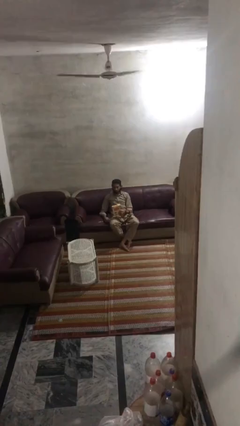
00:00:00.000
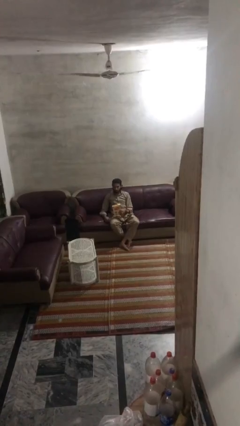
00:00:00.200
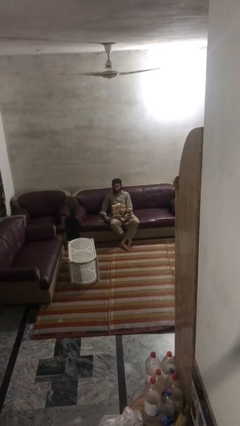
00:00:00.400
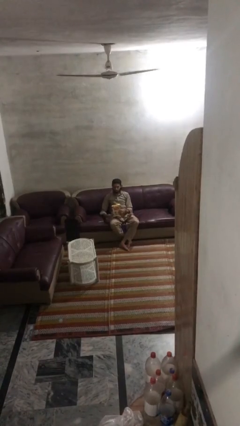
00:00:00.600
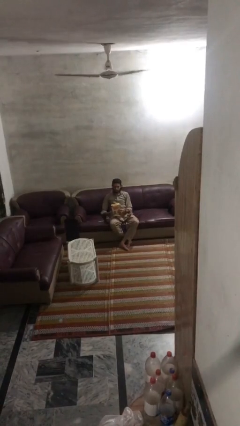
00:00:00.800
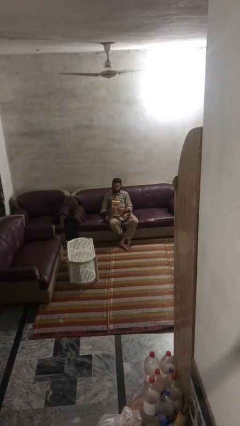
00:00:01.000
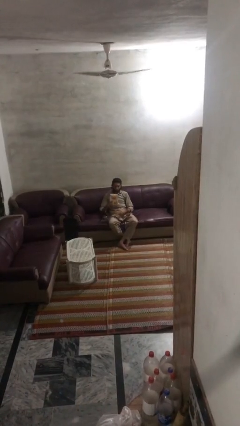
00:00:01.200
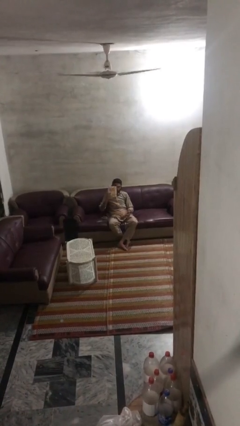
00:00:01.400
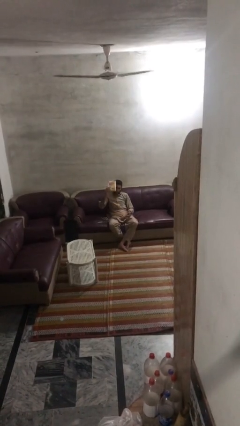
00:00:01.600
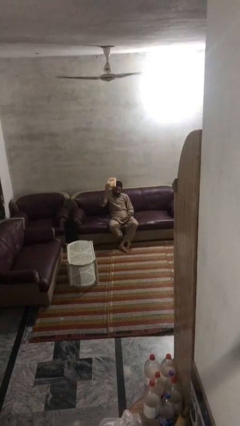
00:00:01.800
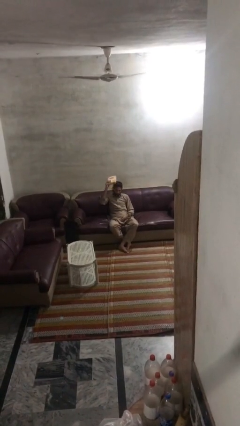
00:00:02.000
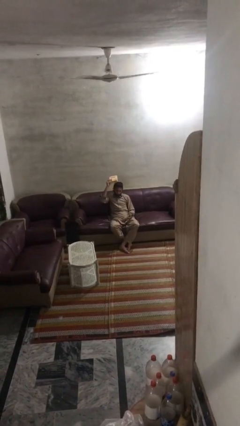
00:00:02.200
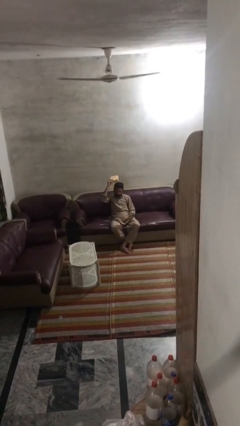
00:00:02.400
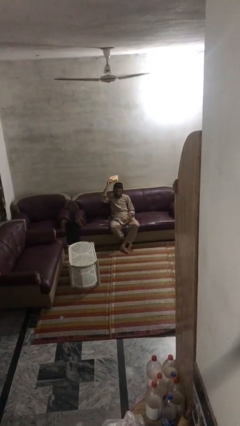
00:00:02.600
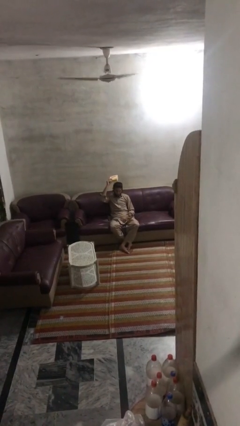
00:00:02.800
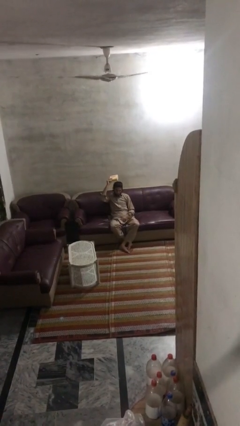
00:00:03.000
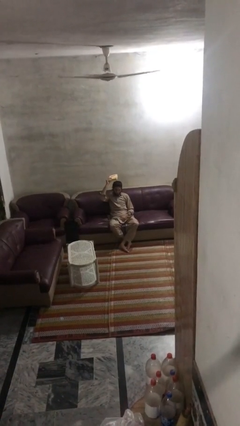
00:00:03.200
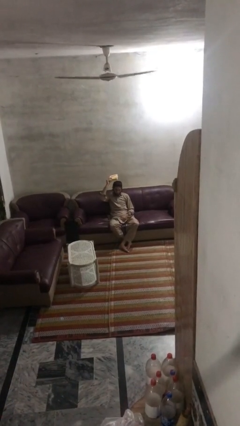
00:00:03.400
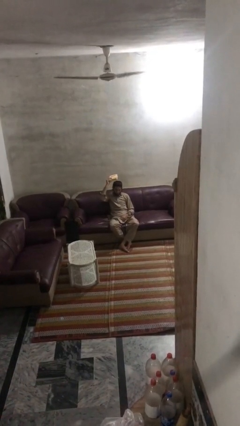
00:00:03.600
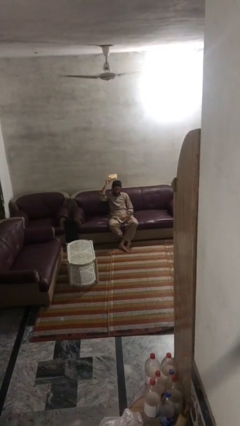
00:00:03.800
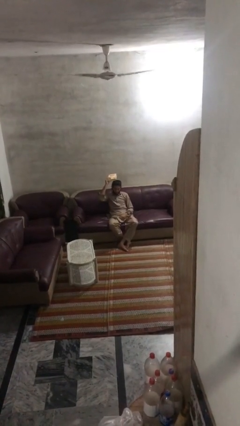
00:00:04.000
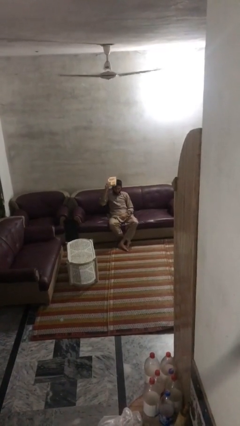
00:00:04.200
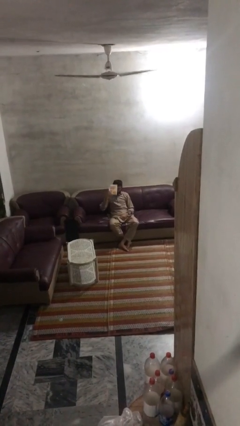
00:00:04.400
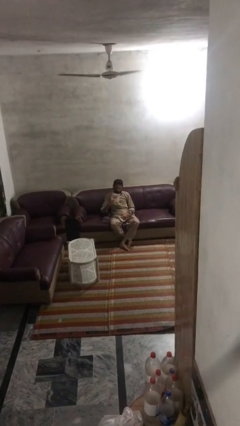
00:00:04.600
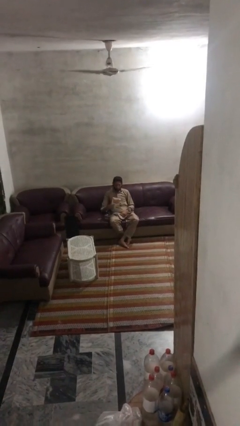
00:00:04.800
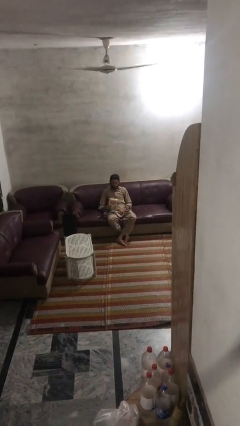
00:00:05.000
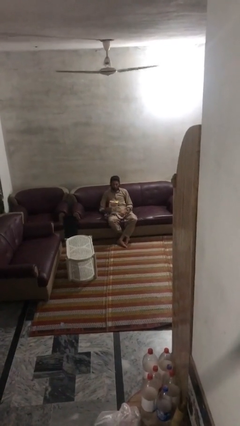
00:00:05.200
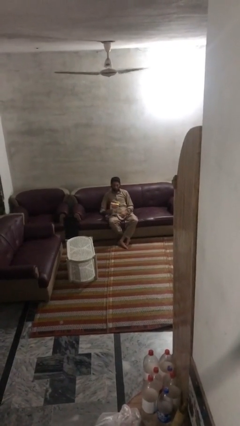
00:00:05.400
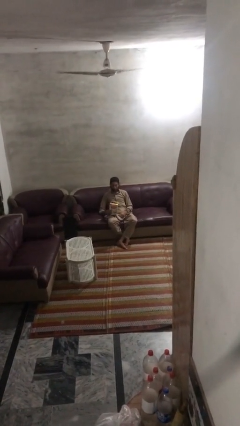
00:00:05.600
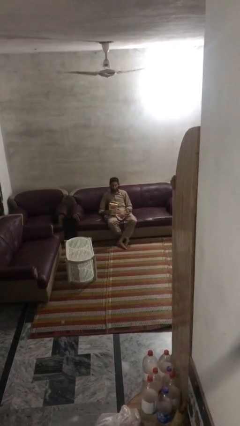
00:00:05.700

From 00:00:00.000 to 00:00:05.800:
person holds object above head

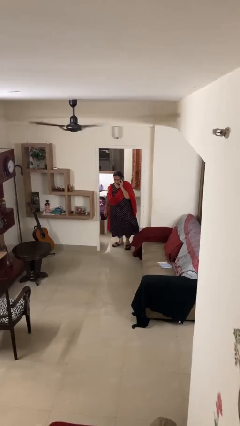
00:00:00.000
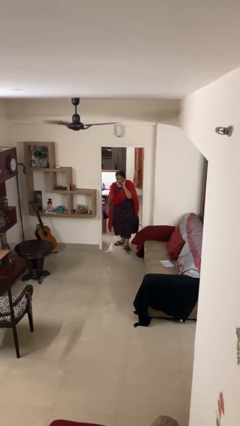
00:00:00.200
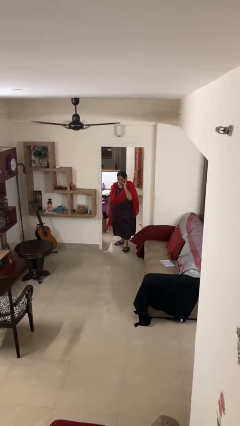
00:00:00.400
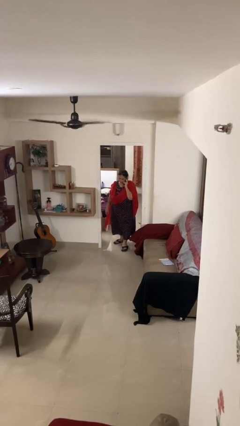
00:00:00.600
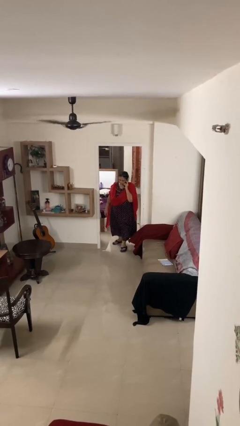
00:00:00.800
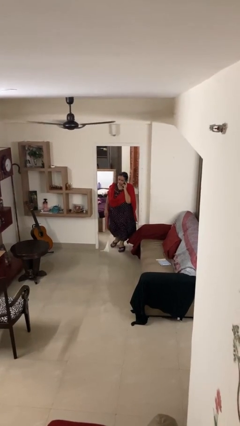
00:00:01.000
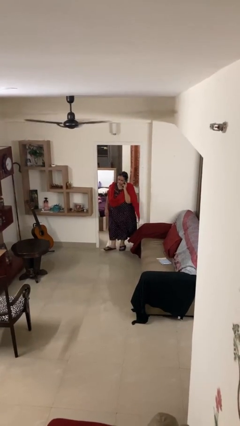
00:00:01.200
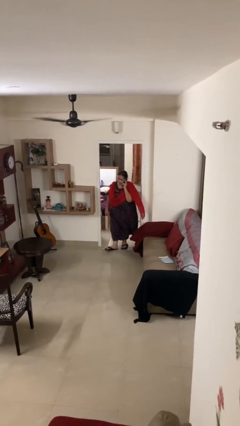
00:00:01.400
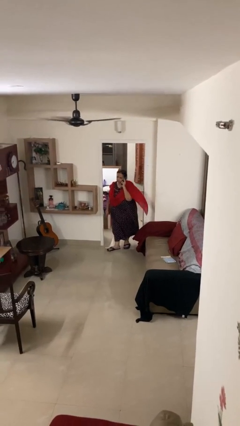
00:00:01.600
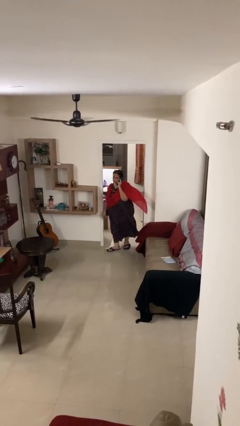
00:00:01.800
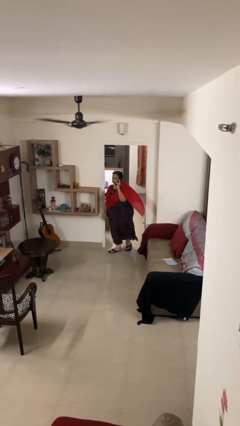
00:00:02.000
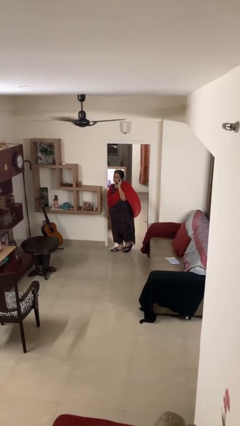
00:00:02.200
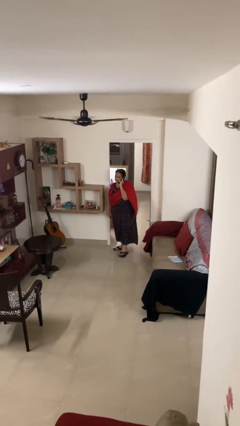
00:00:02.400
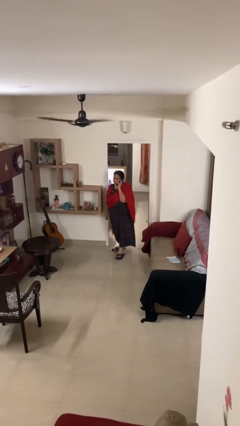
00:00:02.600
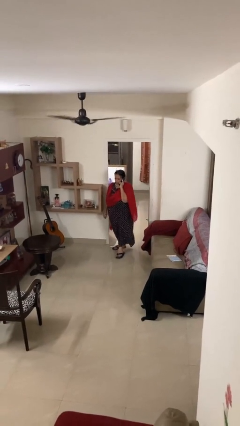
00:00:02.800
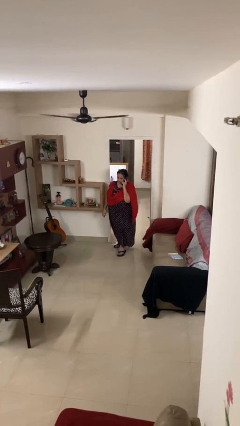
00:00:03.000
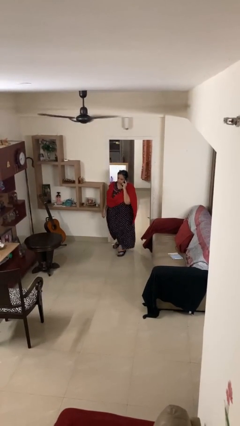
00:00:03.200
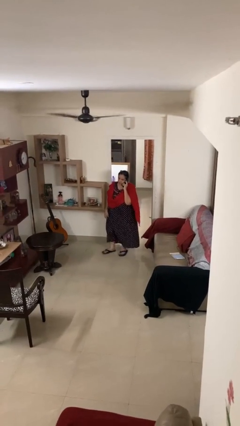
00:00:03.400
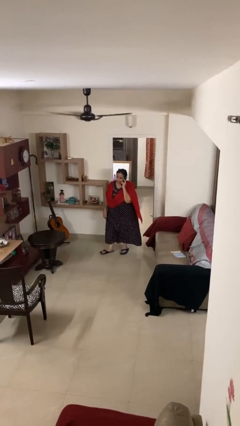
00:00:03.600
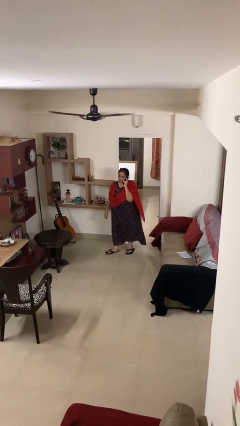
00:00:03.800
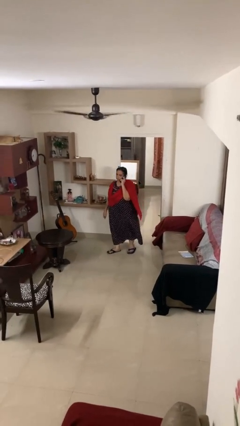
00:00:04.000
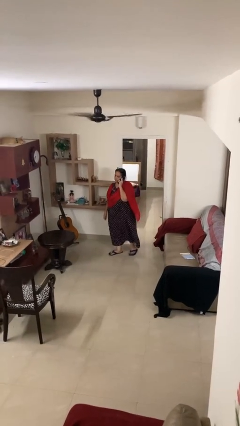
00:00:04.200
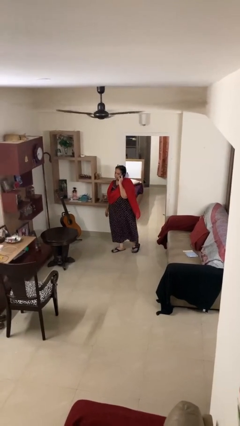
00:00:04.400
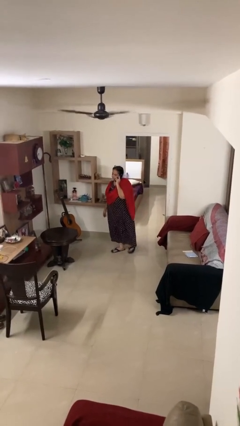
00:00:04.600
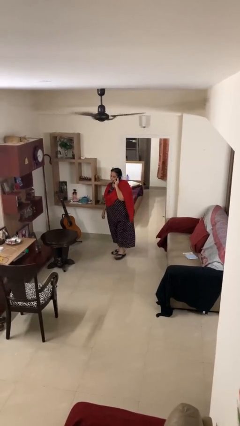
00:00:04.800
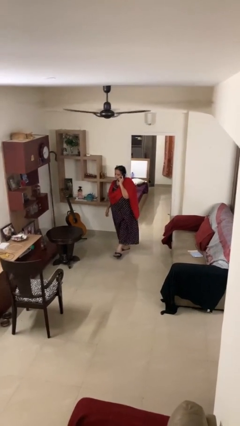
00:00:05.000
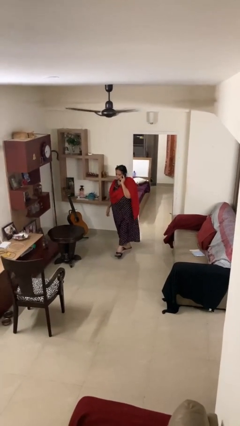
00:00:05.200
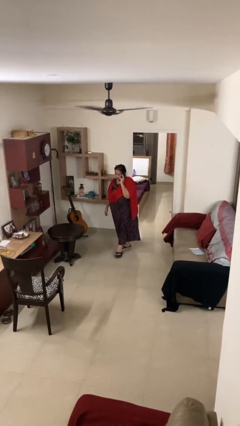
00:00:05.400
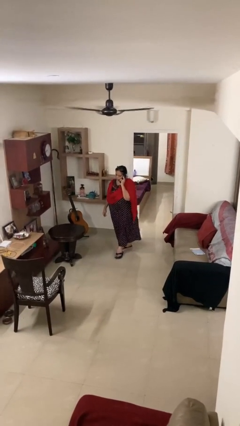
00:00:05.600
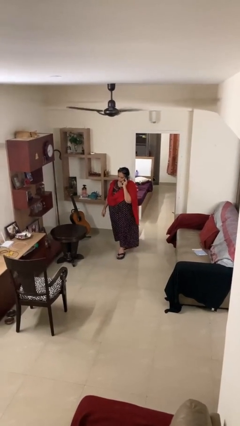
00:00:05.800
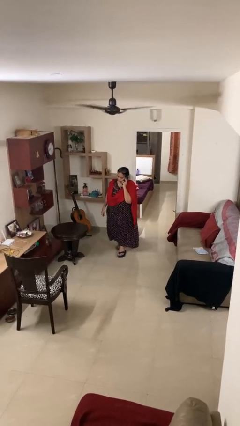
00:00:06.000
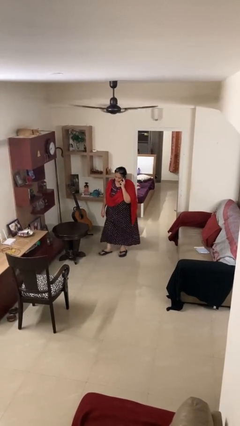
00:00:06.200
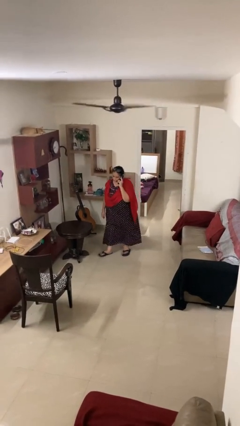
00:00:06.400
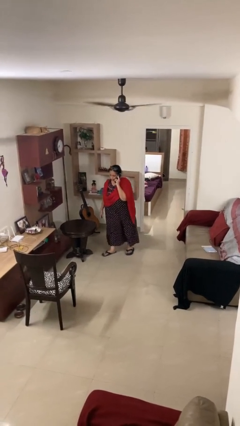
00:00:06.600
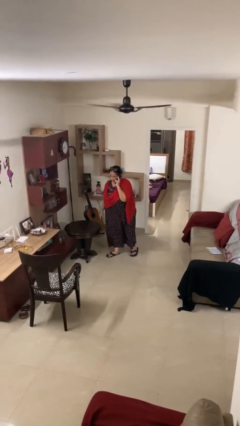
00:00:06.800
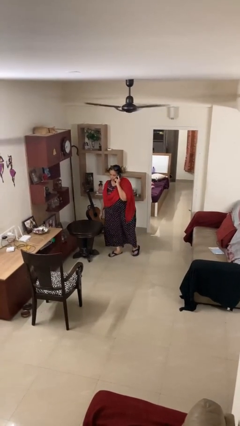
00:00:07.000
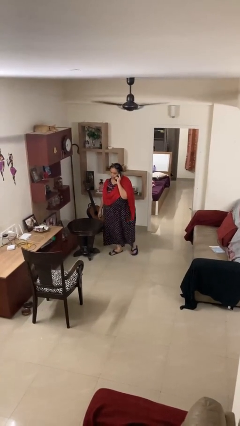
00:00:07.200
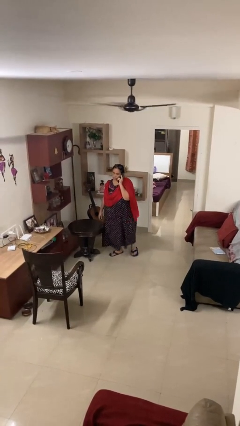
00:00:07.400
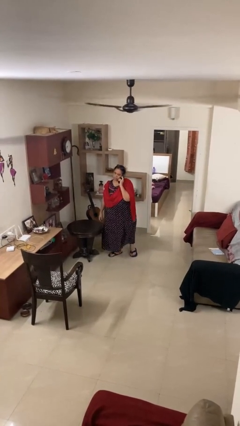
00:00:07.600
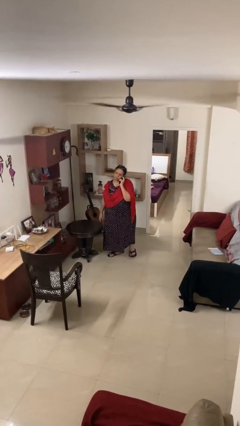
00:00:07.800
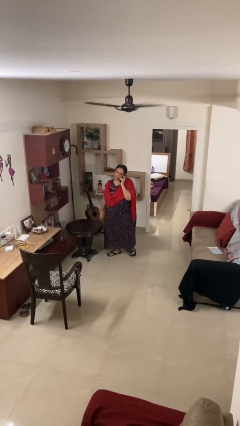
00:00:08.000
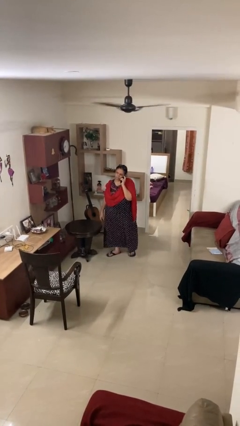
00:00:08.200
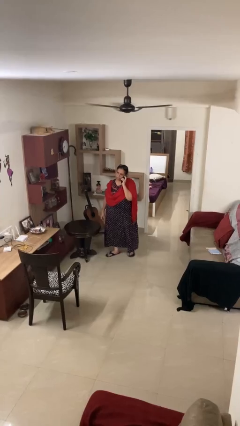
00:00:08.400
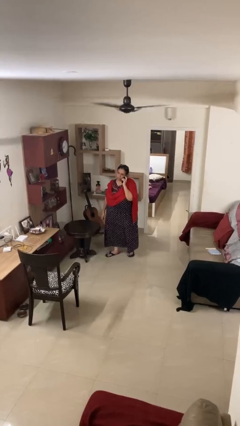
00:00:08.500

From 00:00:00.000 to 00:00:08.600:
person enters scene through structure

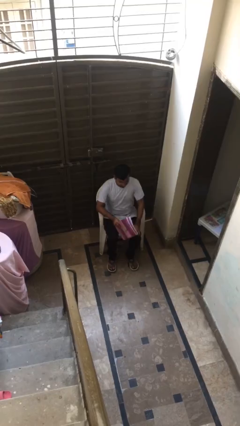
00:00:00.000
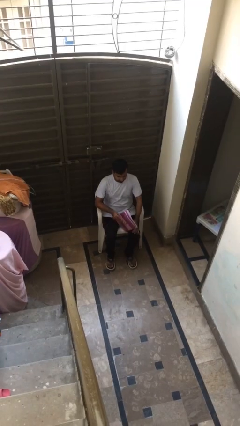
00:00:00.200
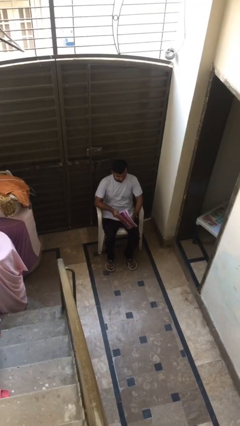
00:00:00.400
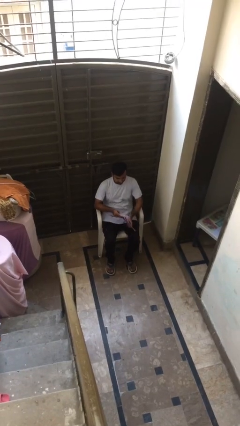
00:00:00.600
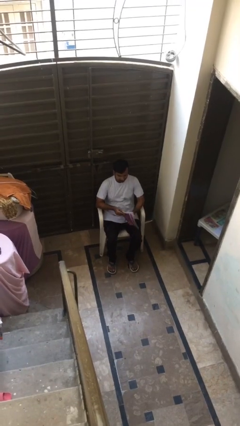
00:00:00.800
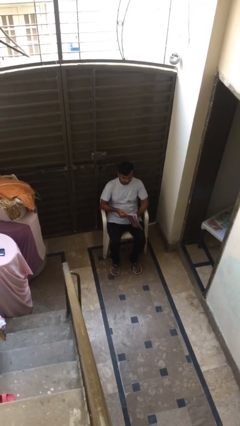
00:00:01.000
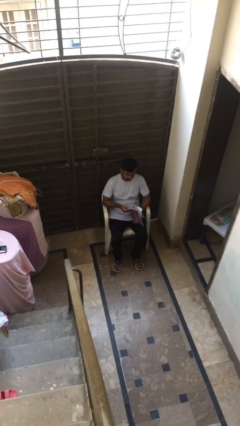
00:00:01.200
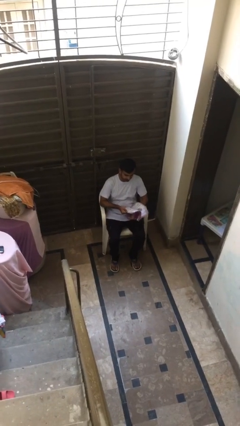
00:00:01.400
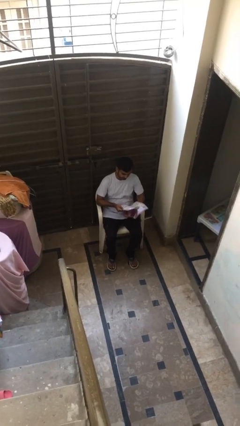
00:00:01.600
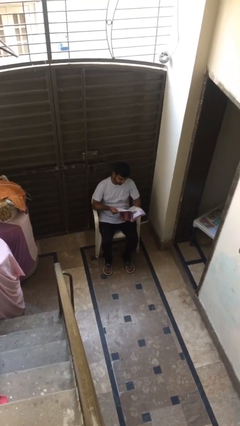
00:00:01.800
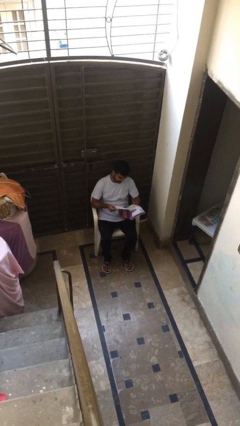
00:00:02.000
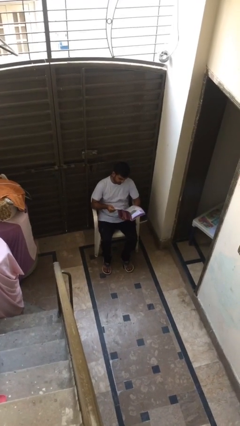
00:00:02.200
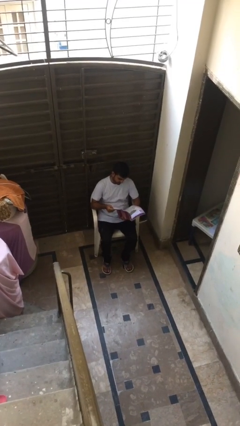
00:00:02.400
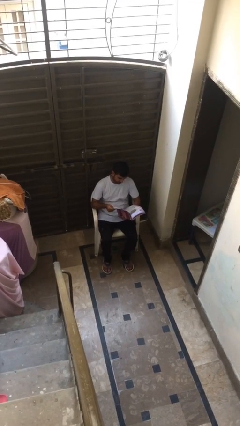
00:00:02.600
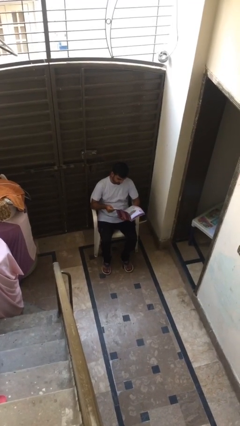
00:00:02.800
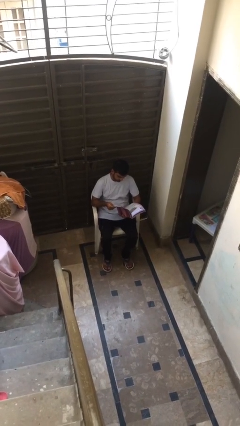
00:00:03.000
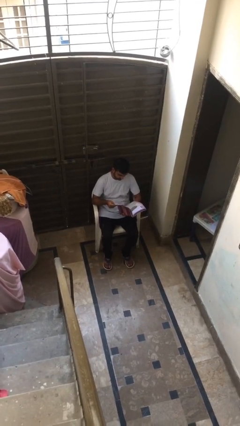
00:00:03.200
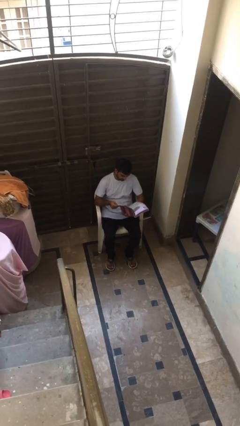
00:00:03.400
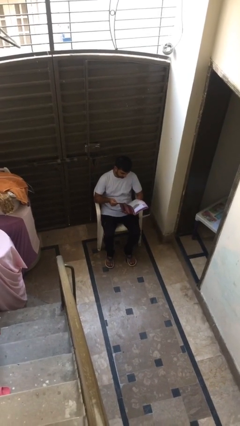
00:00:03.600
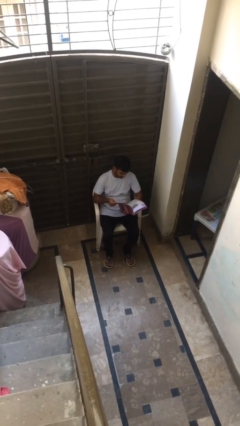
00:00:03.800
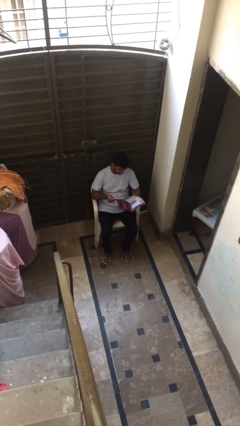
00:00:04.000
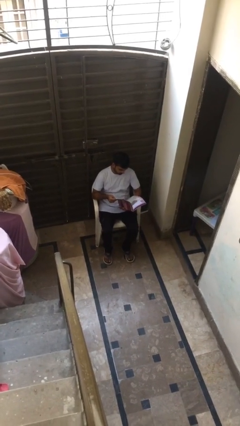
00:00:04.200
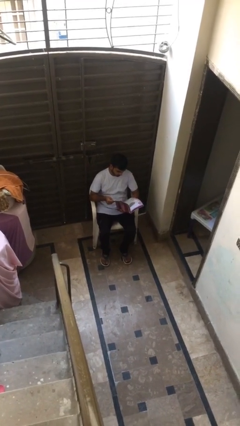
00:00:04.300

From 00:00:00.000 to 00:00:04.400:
person reads document
